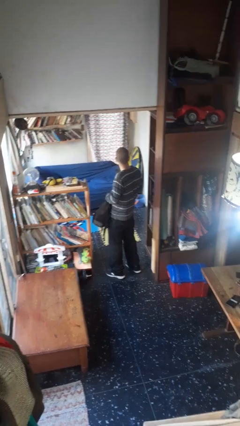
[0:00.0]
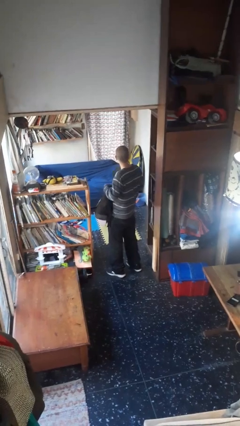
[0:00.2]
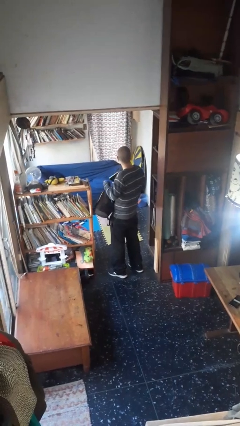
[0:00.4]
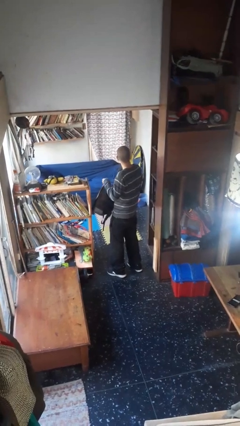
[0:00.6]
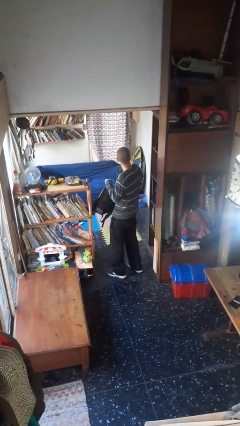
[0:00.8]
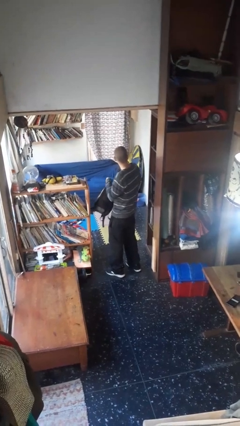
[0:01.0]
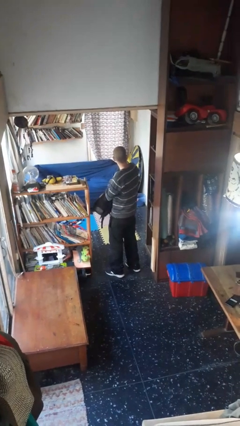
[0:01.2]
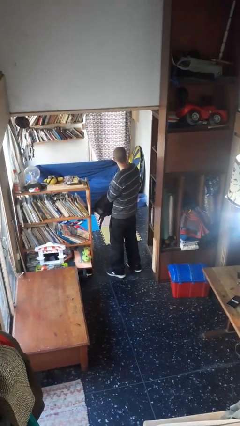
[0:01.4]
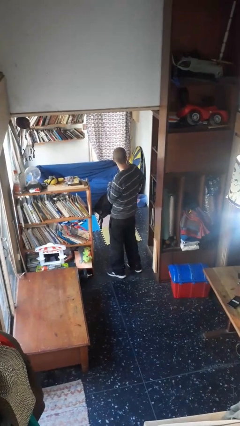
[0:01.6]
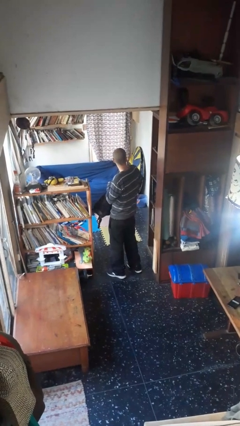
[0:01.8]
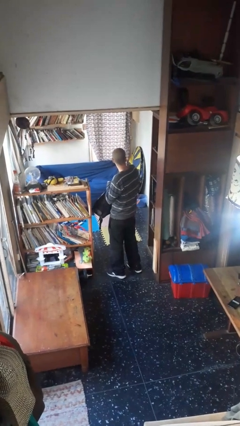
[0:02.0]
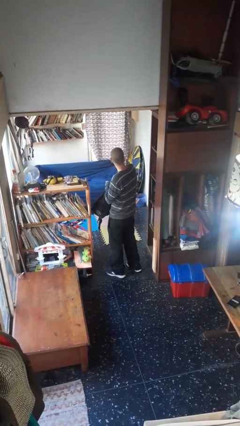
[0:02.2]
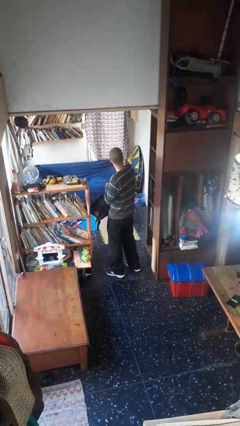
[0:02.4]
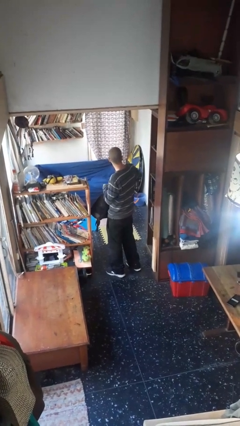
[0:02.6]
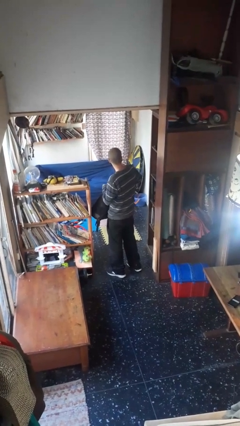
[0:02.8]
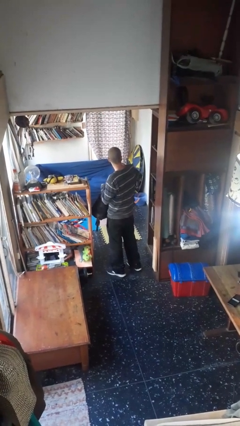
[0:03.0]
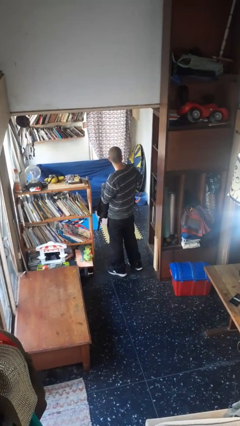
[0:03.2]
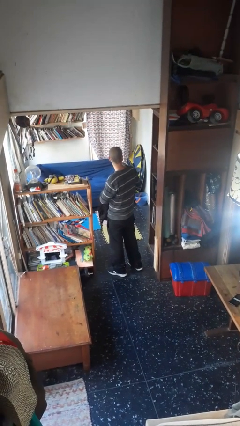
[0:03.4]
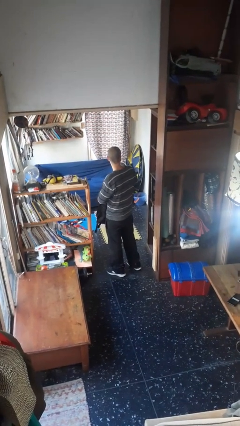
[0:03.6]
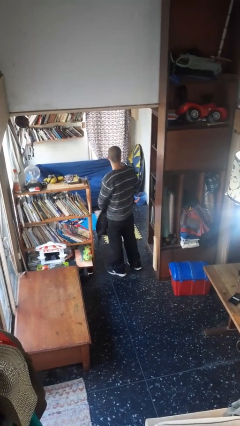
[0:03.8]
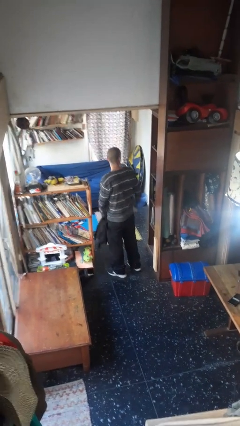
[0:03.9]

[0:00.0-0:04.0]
person puts object into backpack

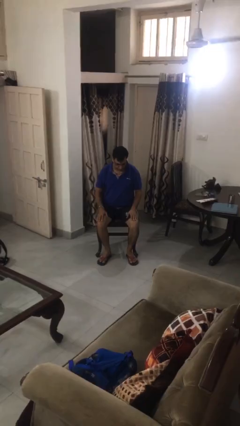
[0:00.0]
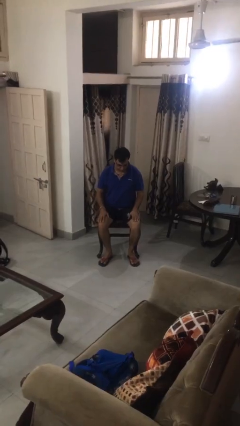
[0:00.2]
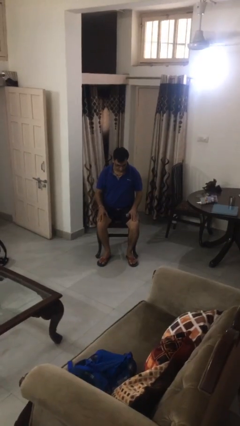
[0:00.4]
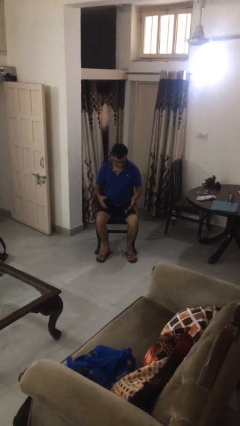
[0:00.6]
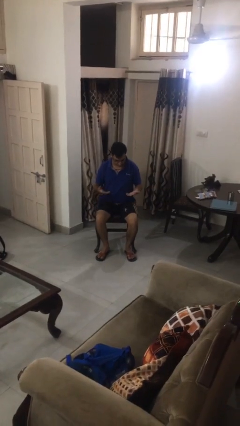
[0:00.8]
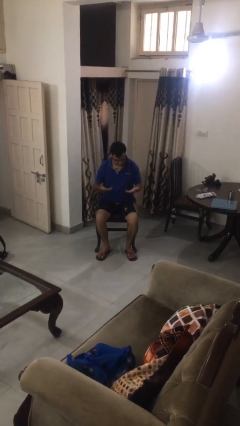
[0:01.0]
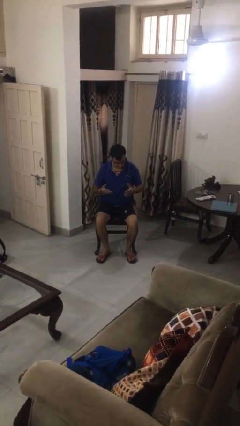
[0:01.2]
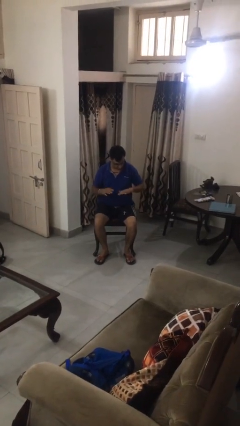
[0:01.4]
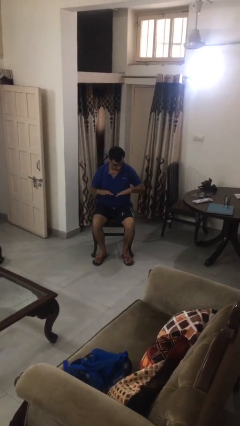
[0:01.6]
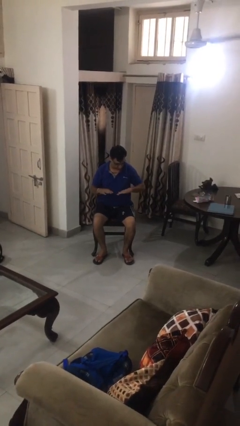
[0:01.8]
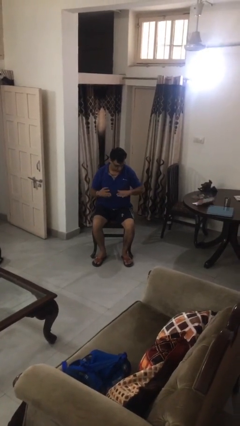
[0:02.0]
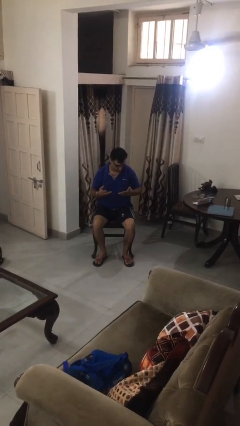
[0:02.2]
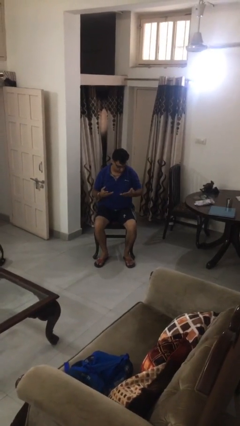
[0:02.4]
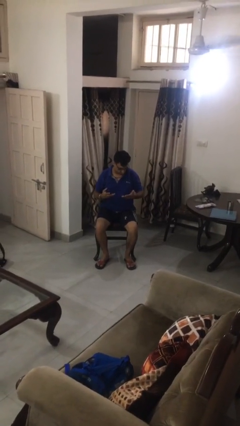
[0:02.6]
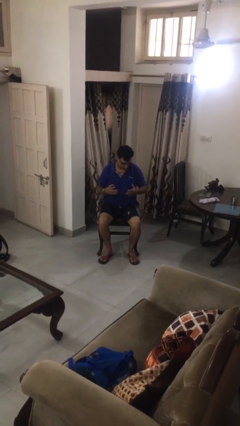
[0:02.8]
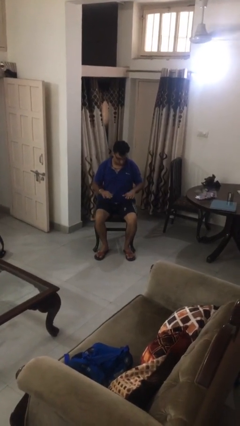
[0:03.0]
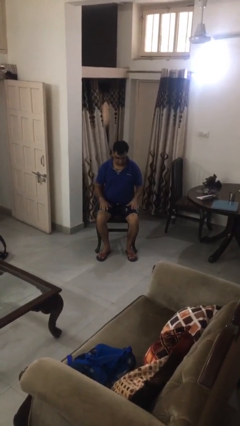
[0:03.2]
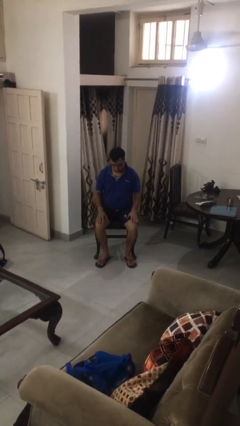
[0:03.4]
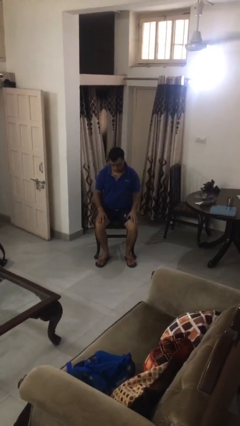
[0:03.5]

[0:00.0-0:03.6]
person looks at hands in lap

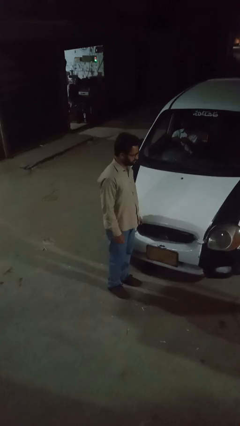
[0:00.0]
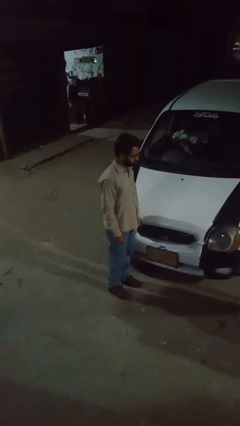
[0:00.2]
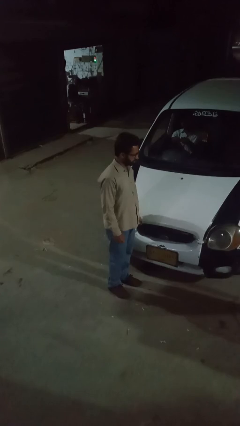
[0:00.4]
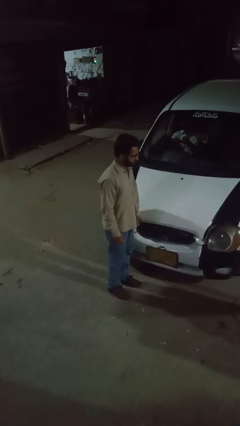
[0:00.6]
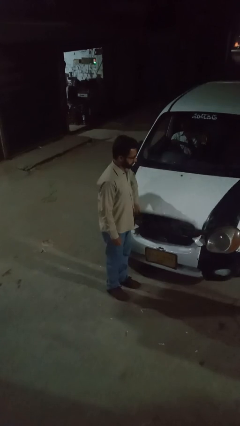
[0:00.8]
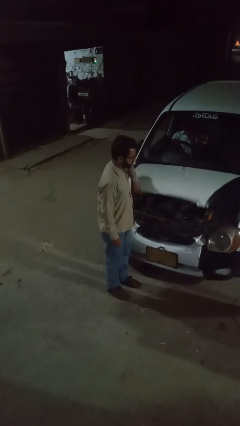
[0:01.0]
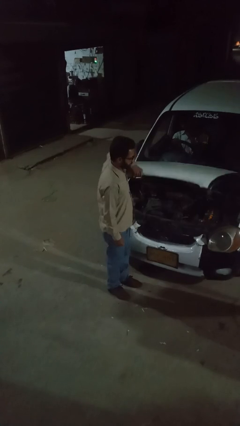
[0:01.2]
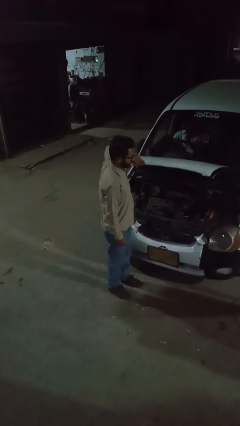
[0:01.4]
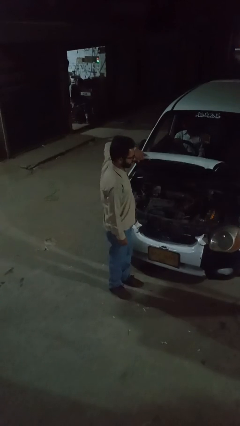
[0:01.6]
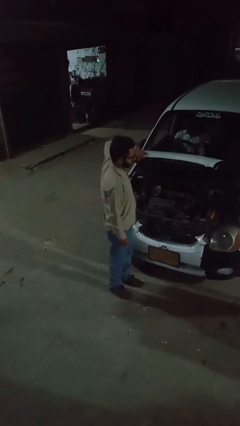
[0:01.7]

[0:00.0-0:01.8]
person opens car hood

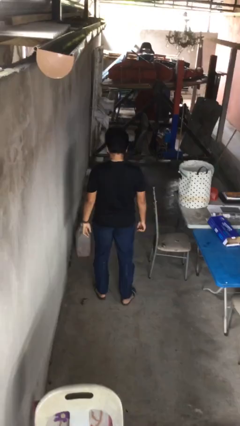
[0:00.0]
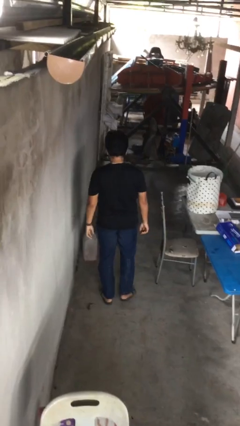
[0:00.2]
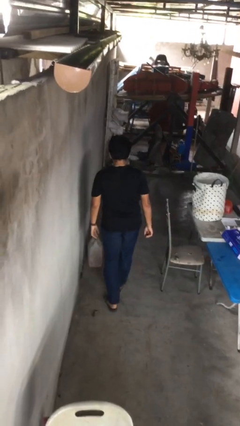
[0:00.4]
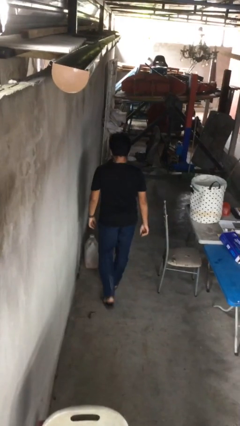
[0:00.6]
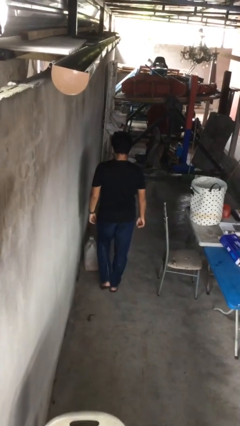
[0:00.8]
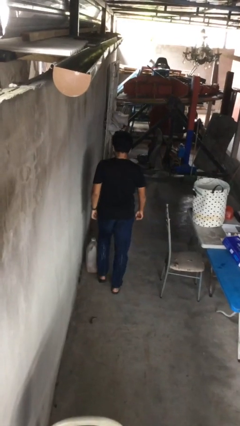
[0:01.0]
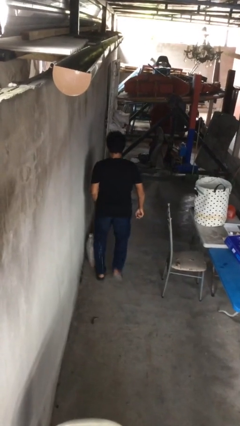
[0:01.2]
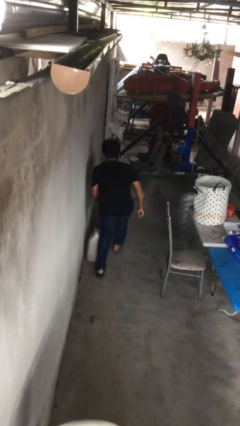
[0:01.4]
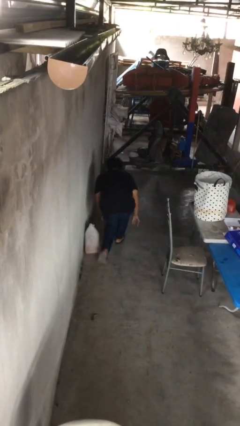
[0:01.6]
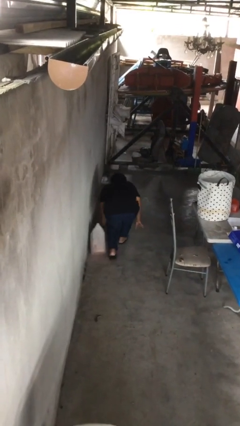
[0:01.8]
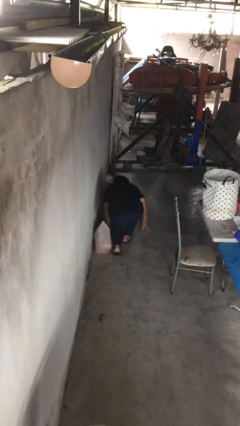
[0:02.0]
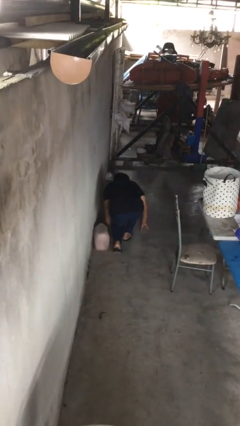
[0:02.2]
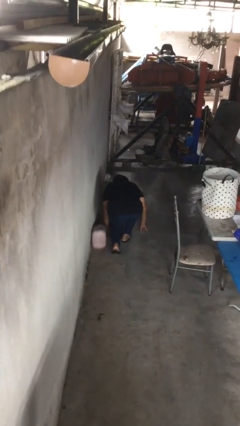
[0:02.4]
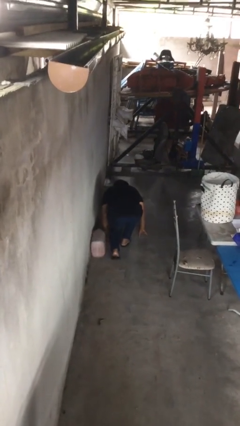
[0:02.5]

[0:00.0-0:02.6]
person trips on object on floor

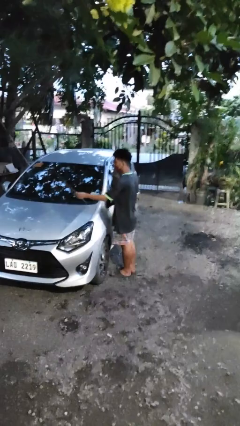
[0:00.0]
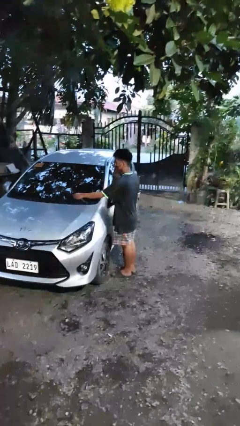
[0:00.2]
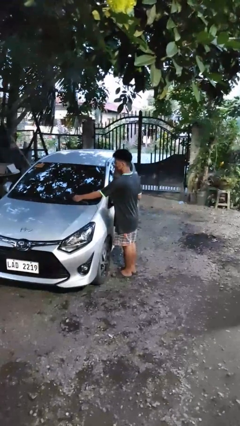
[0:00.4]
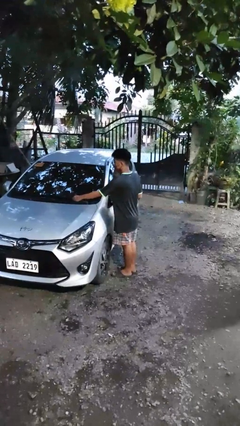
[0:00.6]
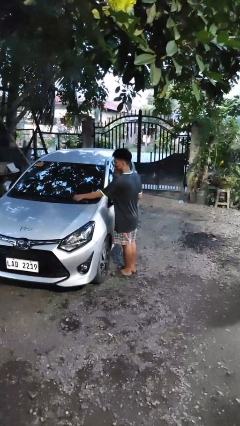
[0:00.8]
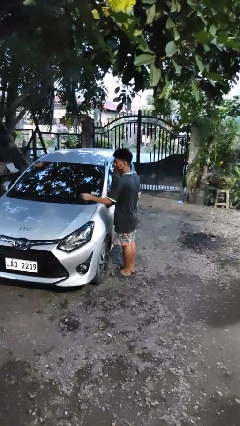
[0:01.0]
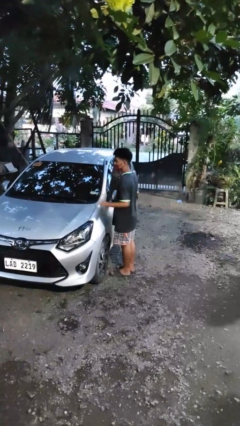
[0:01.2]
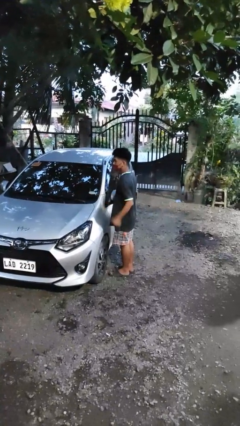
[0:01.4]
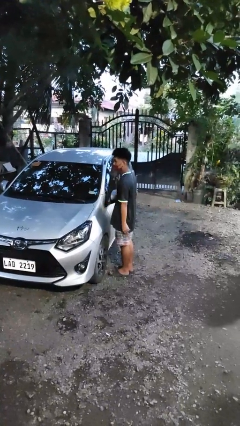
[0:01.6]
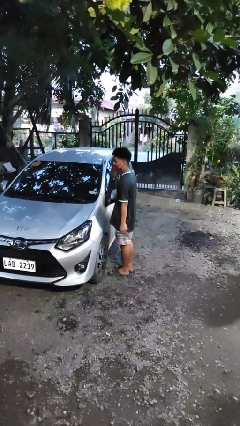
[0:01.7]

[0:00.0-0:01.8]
person flips down car wipers

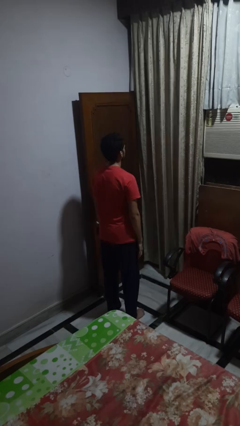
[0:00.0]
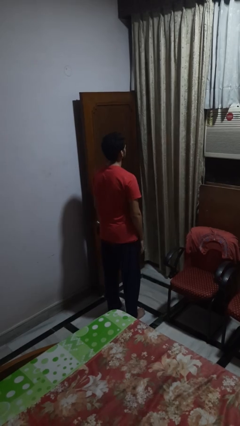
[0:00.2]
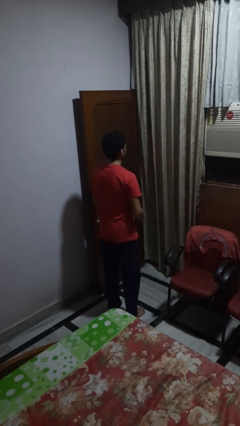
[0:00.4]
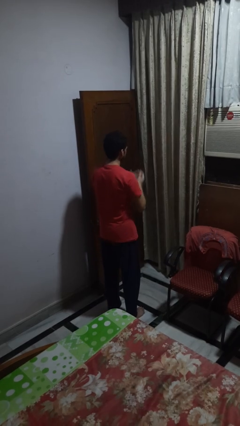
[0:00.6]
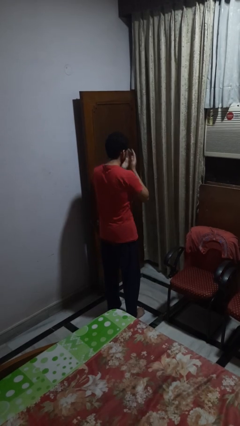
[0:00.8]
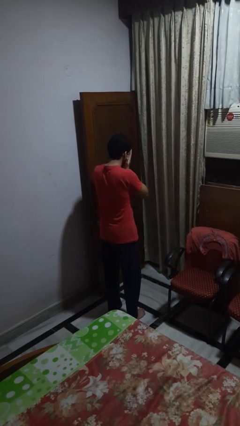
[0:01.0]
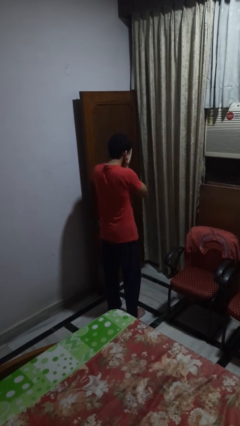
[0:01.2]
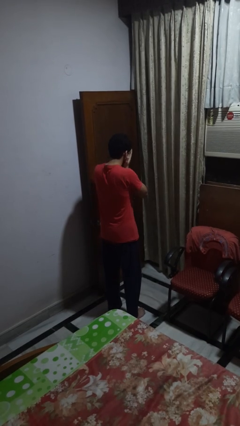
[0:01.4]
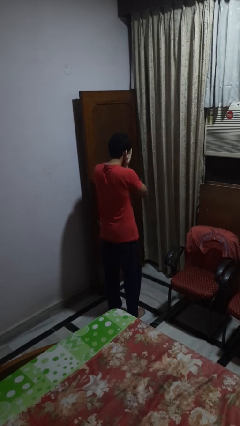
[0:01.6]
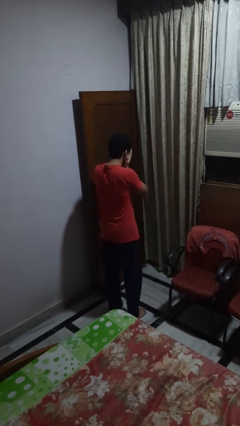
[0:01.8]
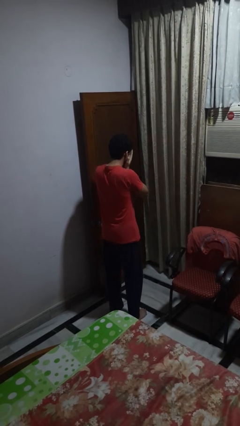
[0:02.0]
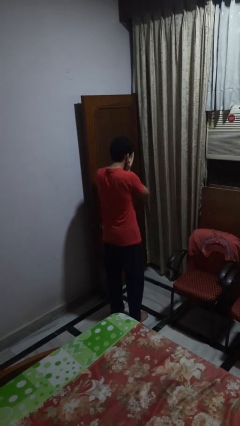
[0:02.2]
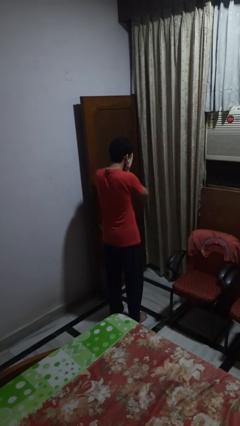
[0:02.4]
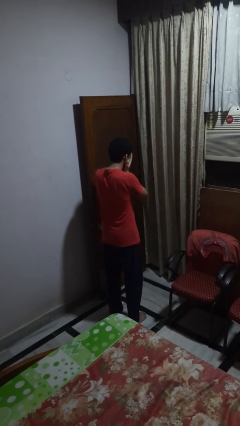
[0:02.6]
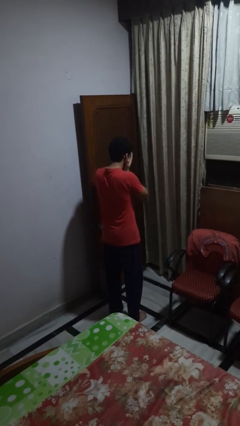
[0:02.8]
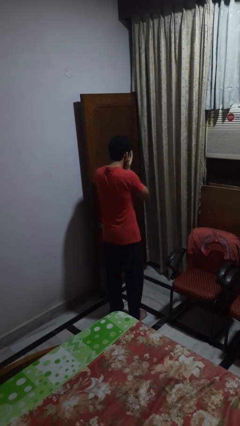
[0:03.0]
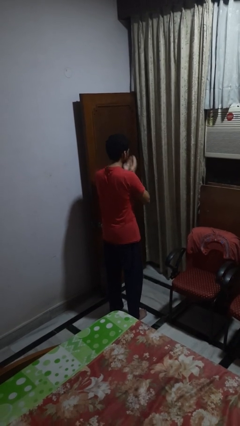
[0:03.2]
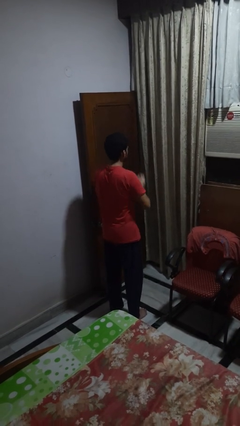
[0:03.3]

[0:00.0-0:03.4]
person covers face with hands

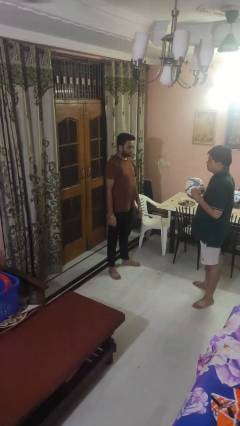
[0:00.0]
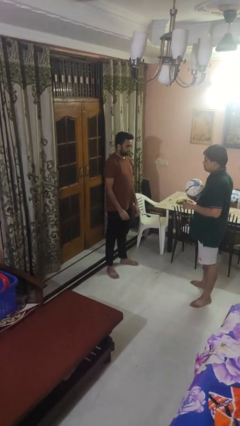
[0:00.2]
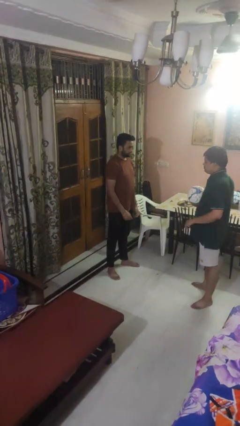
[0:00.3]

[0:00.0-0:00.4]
person throws object to person
